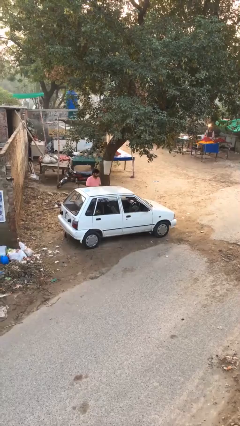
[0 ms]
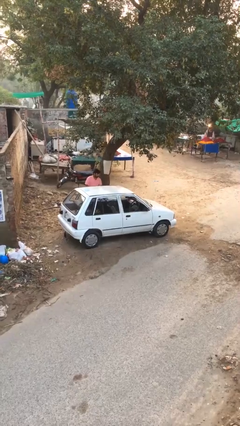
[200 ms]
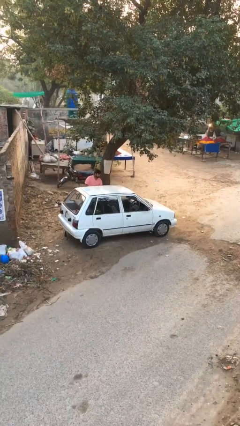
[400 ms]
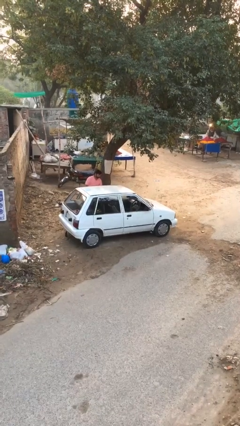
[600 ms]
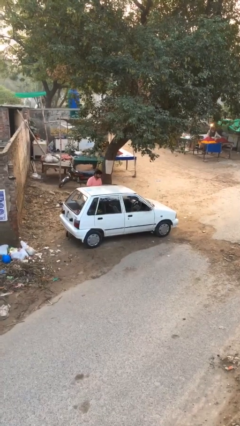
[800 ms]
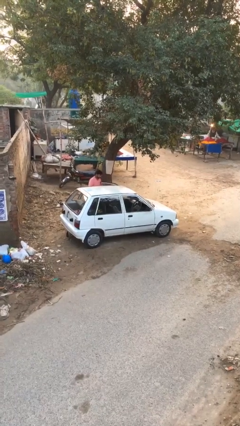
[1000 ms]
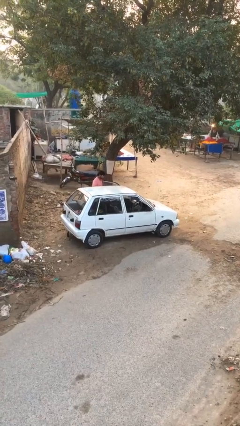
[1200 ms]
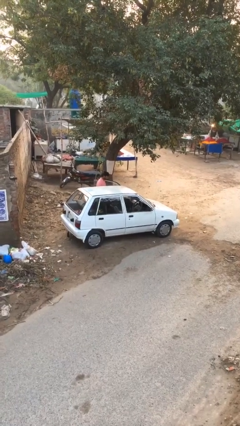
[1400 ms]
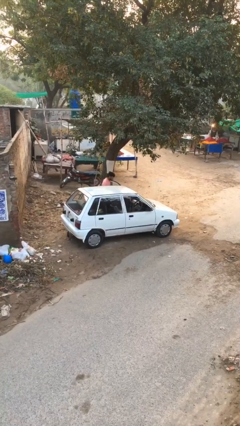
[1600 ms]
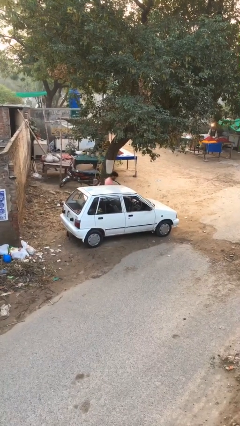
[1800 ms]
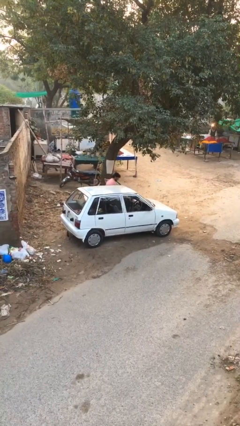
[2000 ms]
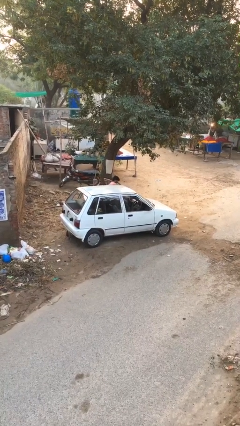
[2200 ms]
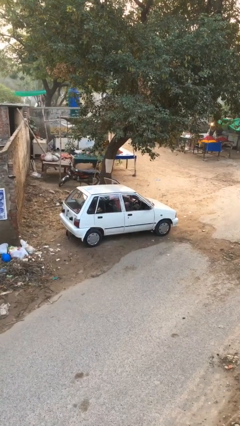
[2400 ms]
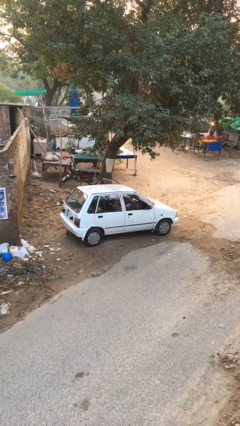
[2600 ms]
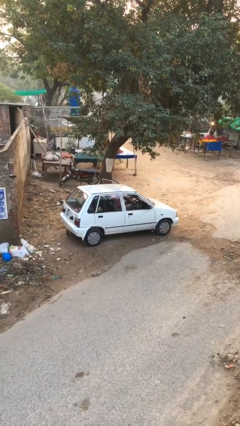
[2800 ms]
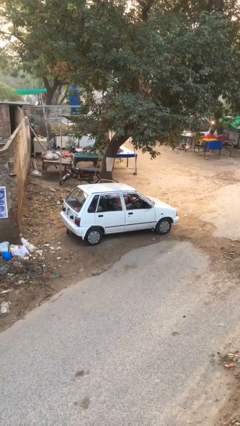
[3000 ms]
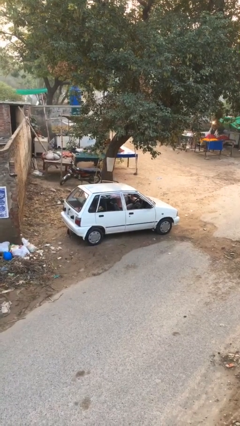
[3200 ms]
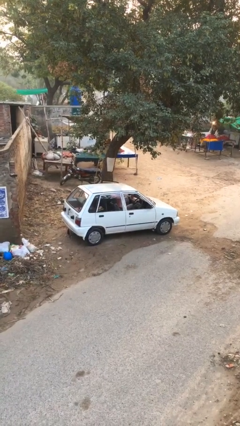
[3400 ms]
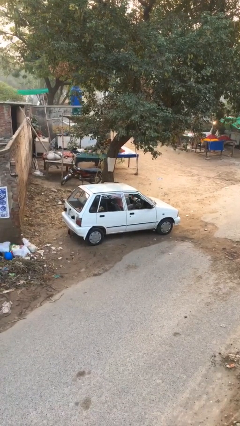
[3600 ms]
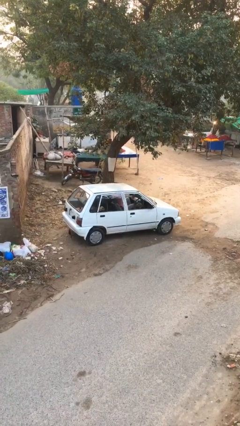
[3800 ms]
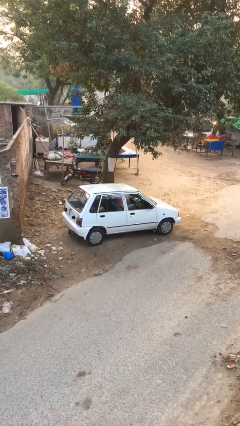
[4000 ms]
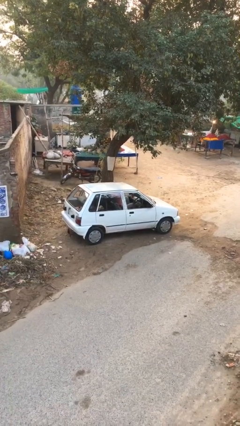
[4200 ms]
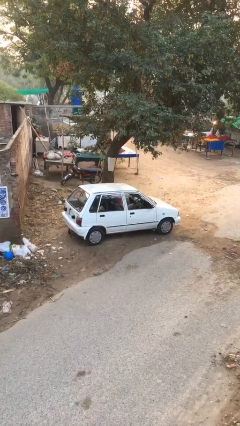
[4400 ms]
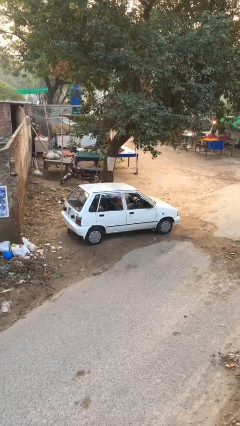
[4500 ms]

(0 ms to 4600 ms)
car picks up person

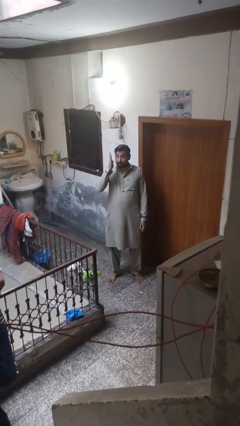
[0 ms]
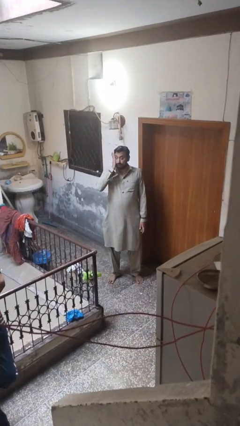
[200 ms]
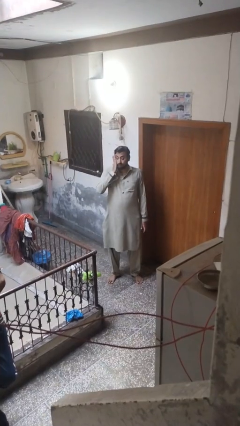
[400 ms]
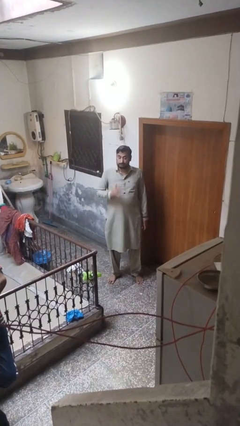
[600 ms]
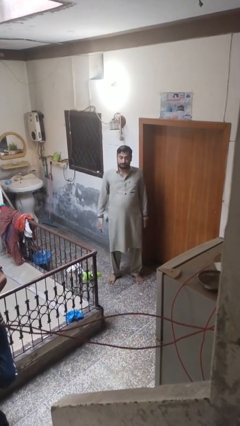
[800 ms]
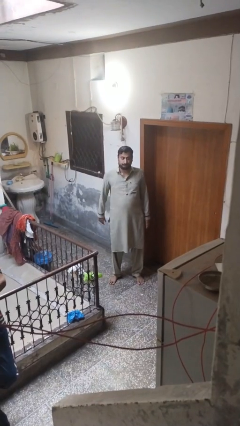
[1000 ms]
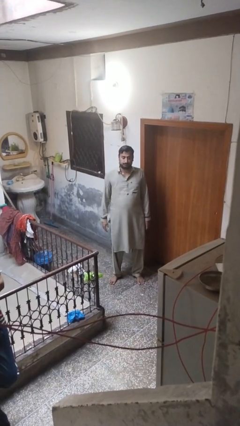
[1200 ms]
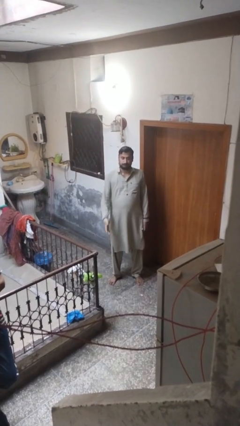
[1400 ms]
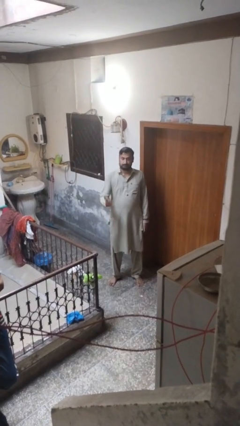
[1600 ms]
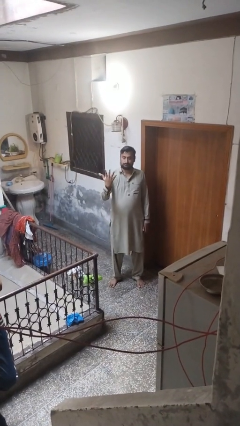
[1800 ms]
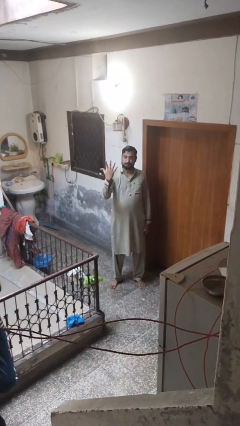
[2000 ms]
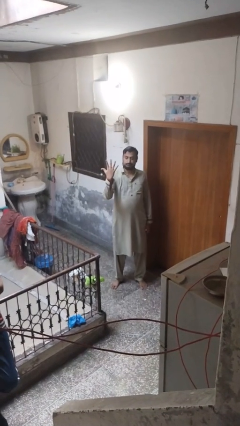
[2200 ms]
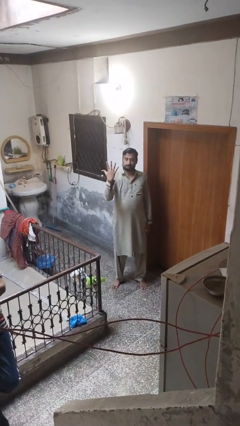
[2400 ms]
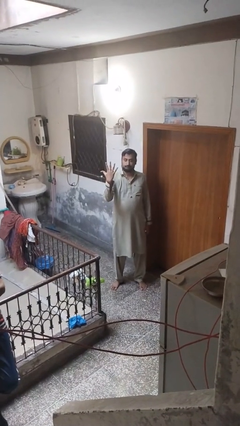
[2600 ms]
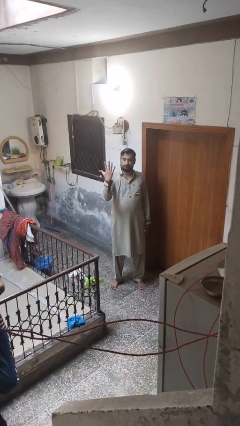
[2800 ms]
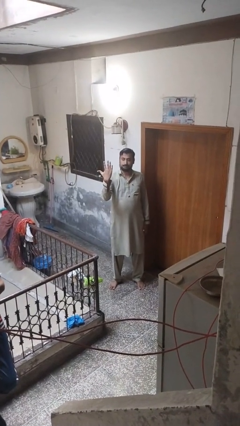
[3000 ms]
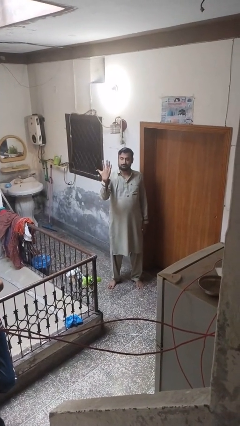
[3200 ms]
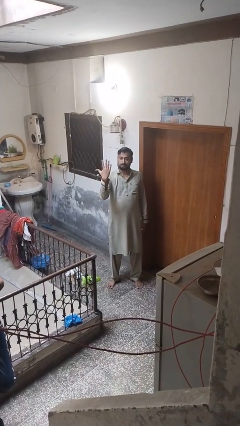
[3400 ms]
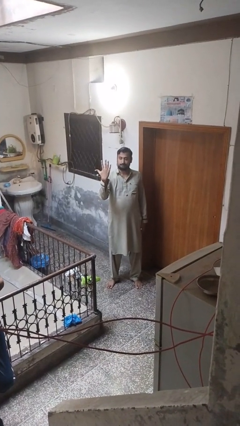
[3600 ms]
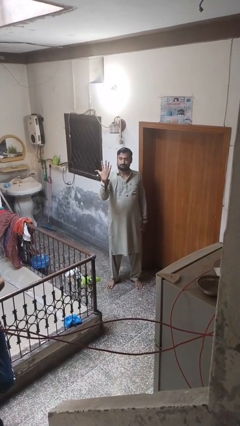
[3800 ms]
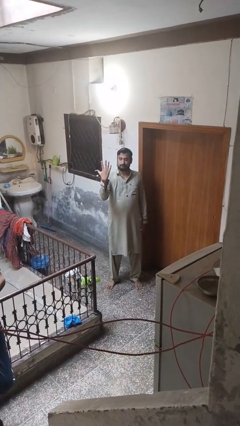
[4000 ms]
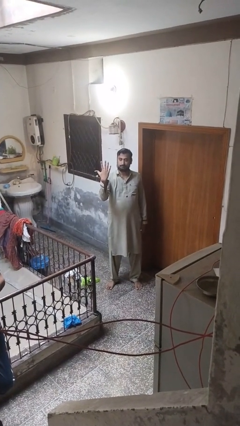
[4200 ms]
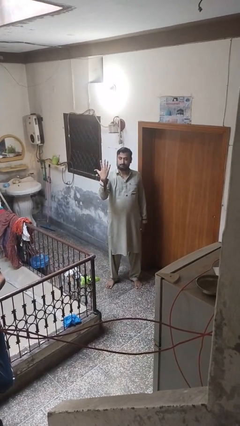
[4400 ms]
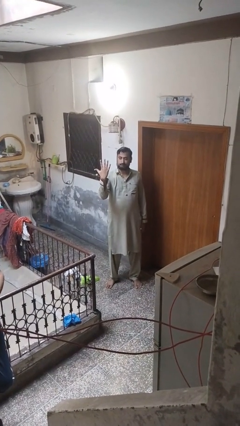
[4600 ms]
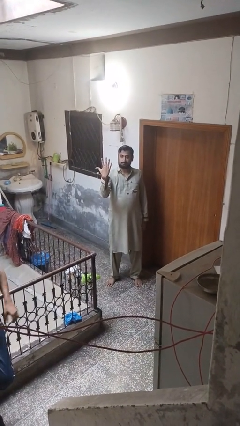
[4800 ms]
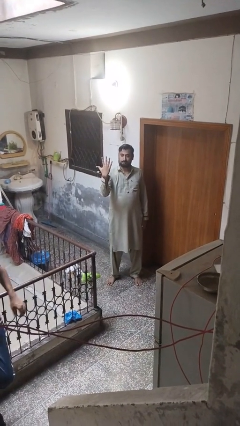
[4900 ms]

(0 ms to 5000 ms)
person gestures number five

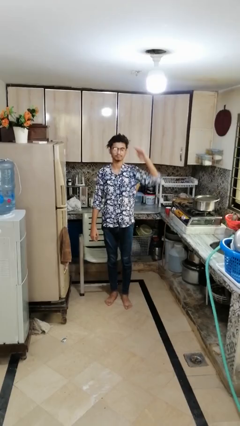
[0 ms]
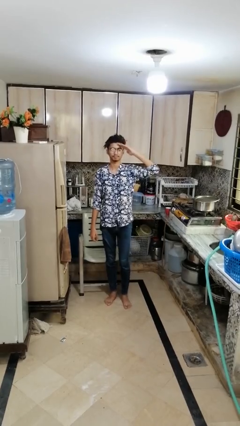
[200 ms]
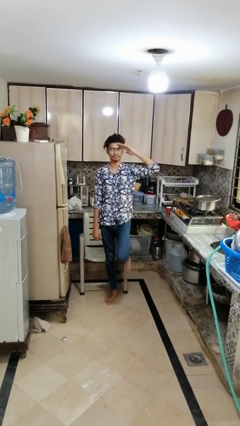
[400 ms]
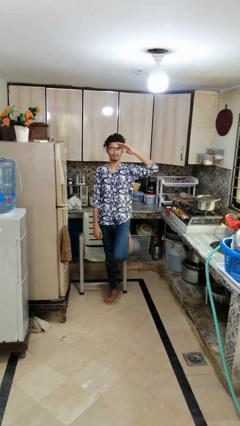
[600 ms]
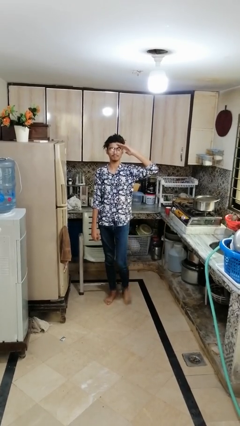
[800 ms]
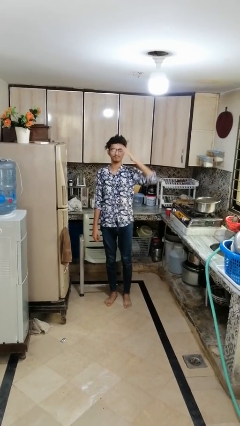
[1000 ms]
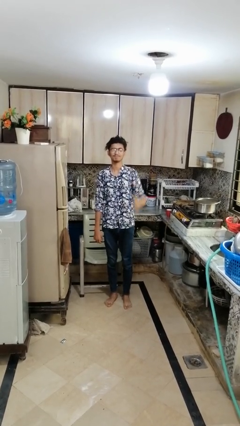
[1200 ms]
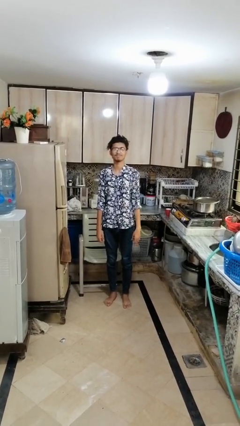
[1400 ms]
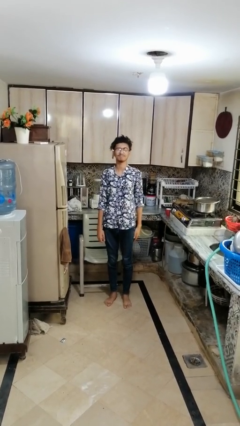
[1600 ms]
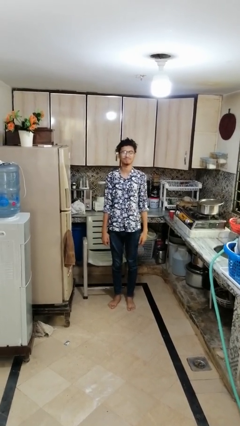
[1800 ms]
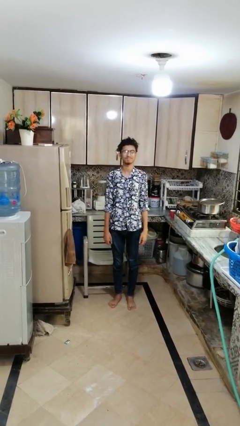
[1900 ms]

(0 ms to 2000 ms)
person salutes

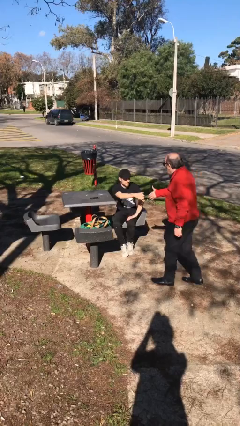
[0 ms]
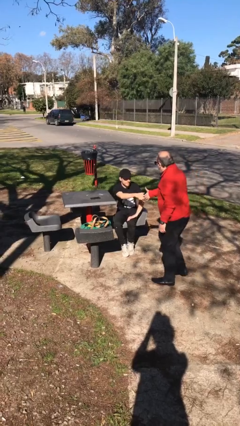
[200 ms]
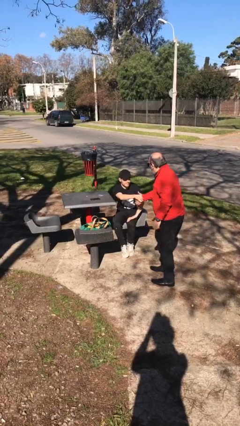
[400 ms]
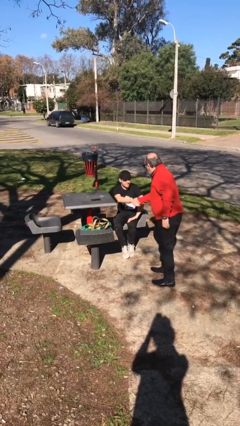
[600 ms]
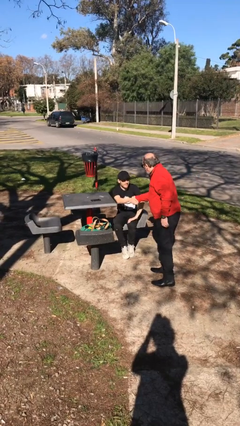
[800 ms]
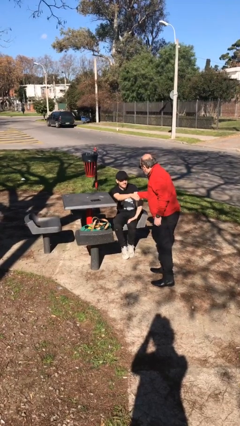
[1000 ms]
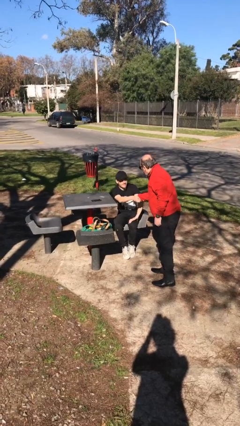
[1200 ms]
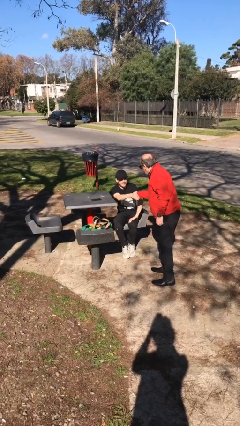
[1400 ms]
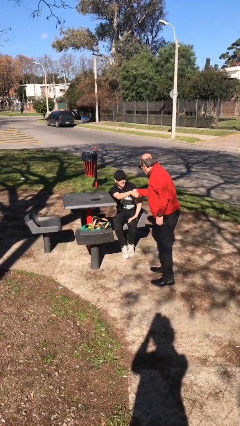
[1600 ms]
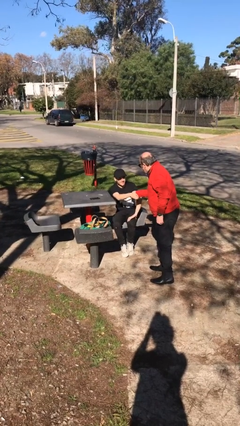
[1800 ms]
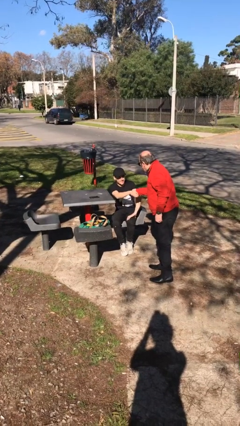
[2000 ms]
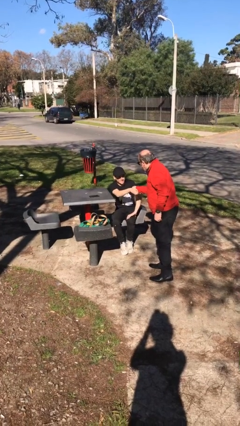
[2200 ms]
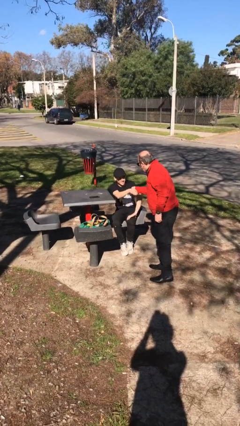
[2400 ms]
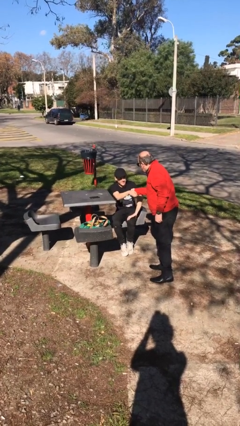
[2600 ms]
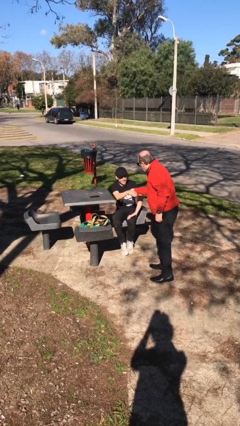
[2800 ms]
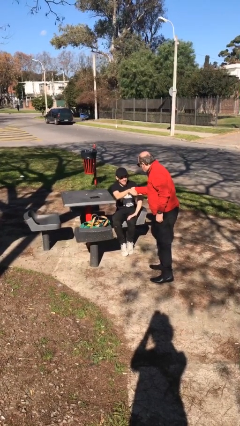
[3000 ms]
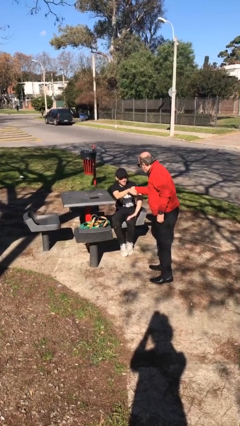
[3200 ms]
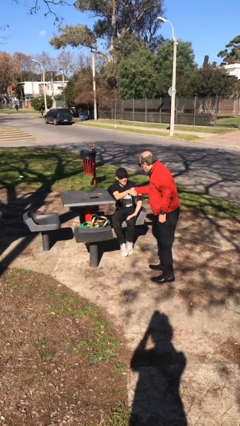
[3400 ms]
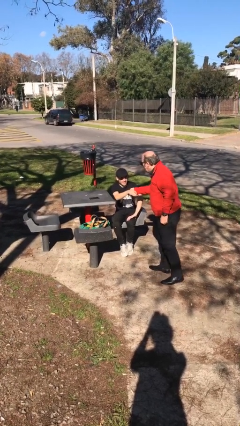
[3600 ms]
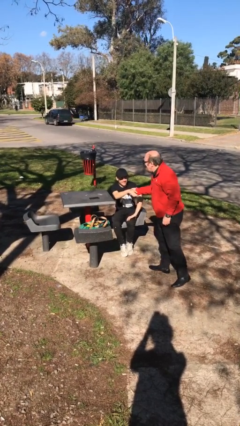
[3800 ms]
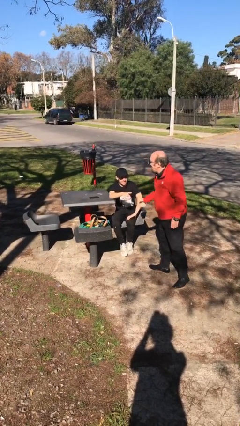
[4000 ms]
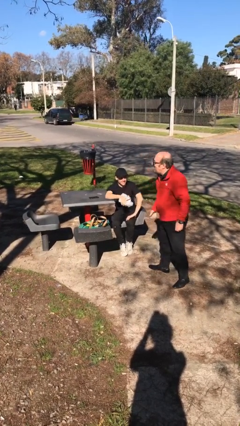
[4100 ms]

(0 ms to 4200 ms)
person shakes hand

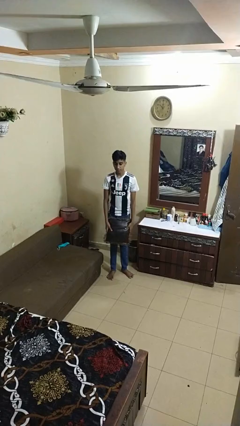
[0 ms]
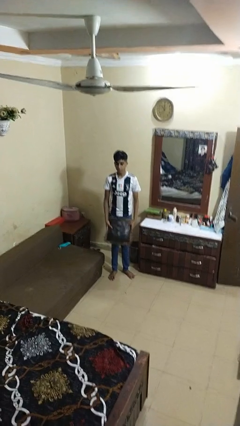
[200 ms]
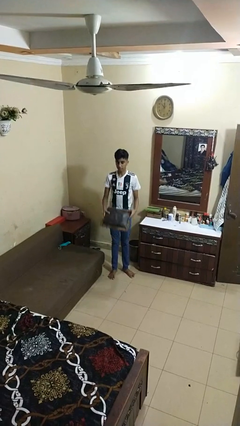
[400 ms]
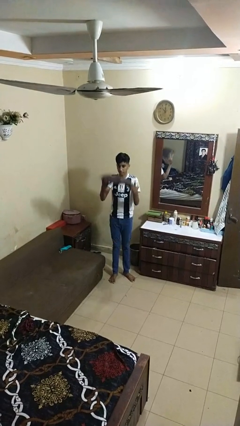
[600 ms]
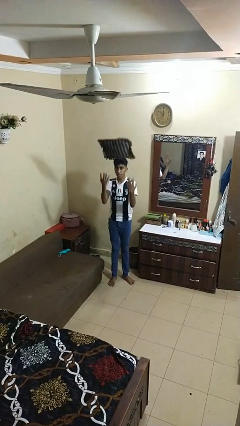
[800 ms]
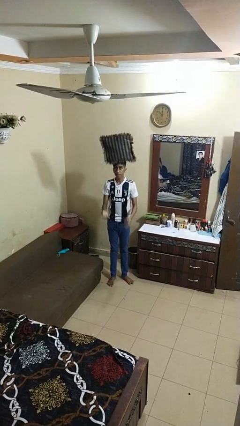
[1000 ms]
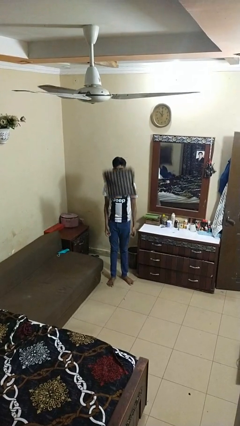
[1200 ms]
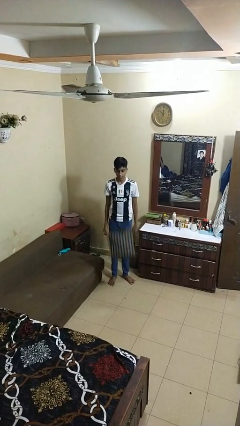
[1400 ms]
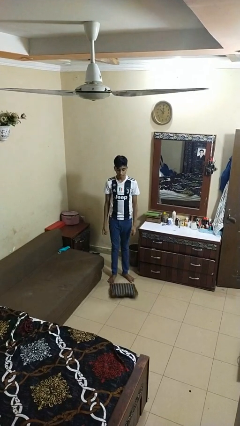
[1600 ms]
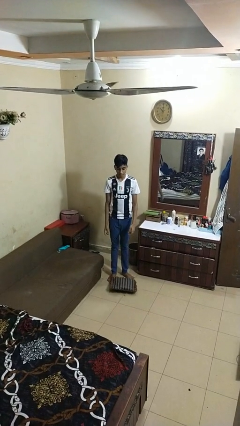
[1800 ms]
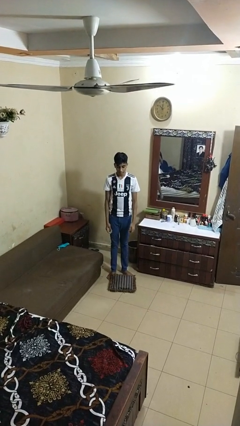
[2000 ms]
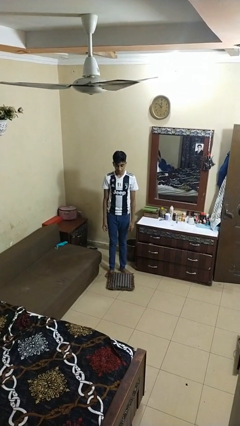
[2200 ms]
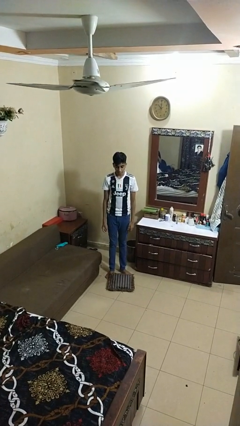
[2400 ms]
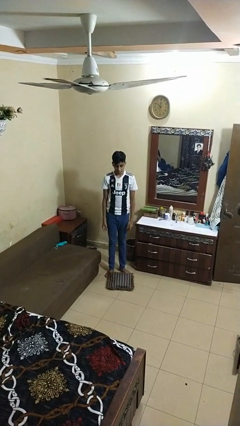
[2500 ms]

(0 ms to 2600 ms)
person throws object into air
